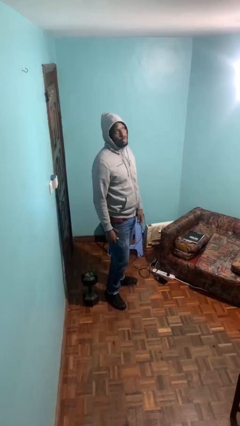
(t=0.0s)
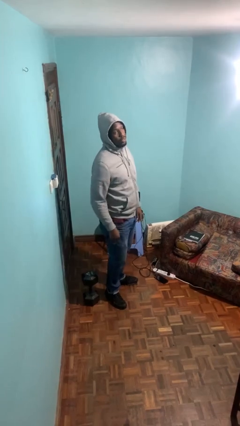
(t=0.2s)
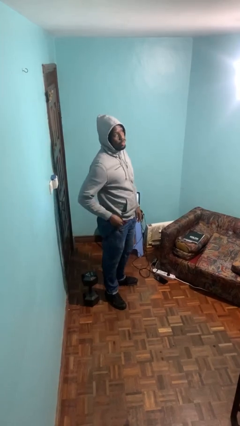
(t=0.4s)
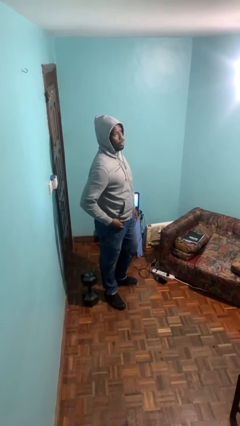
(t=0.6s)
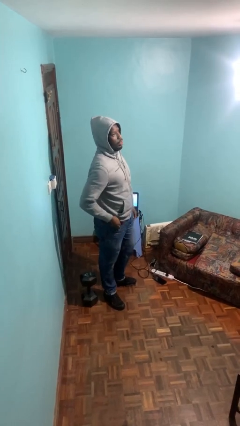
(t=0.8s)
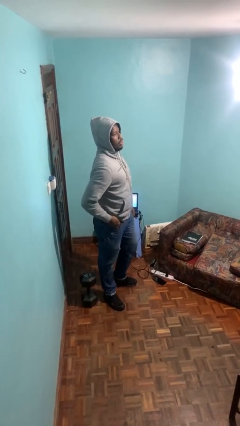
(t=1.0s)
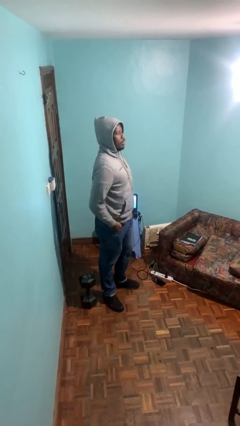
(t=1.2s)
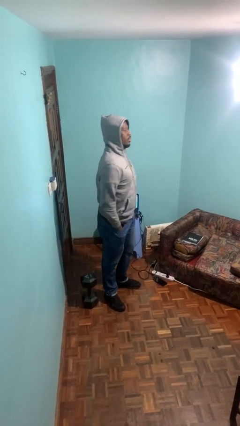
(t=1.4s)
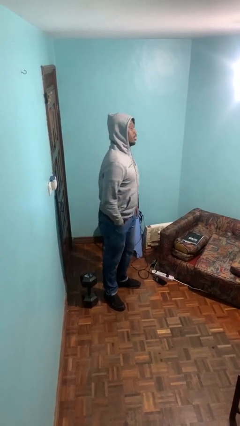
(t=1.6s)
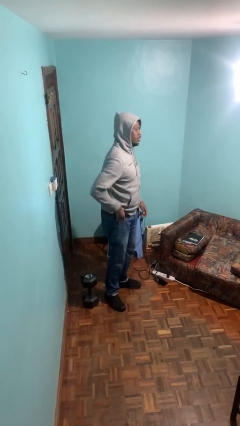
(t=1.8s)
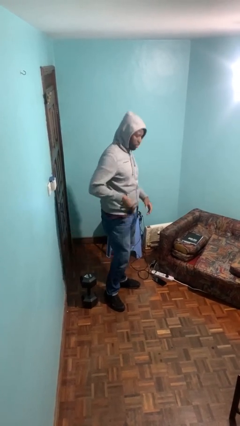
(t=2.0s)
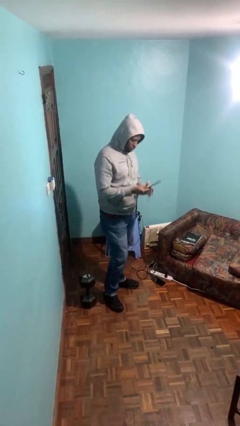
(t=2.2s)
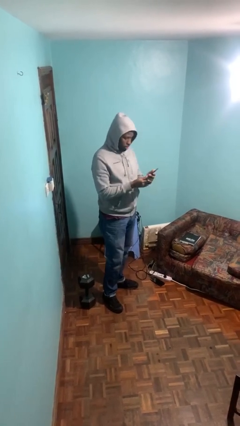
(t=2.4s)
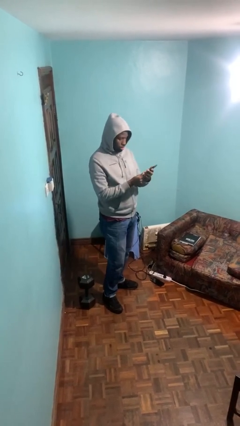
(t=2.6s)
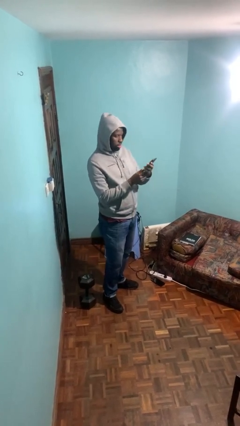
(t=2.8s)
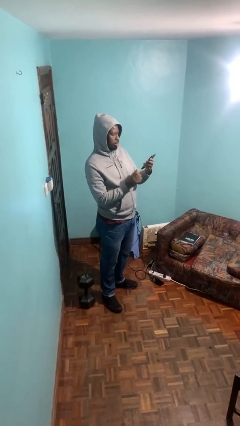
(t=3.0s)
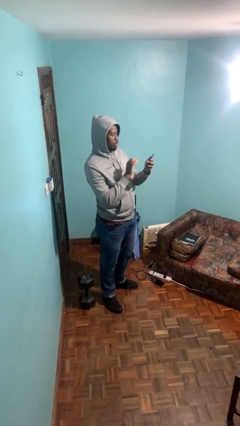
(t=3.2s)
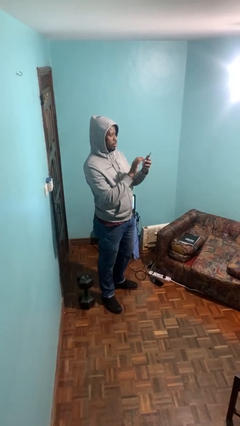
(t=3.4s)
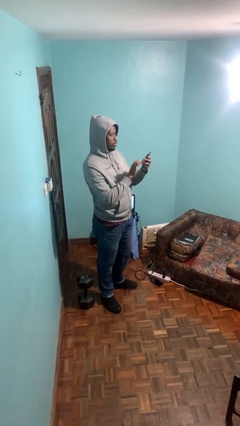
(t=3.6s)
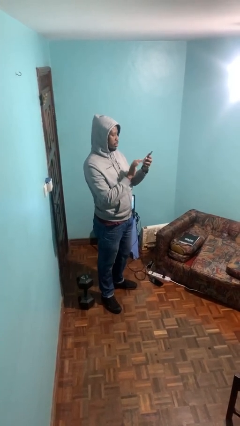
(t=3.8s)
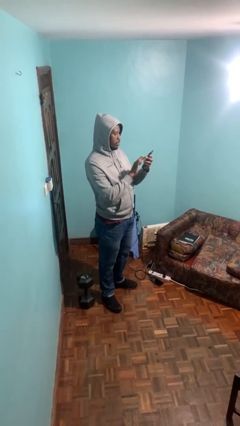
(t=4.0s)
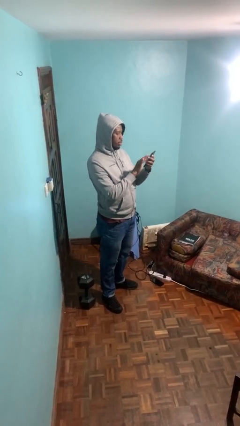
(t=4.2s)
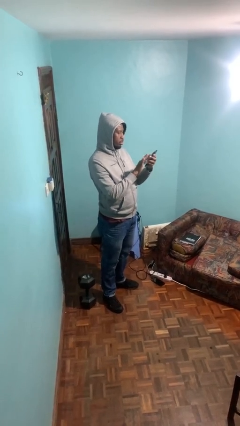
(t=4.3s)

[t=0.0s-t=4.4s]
person takes phone from pocket

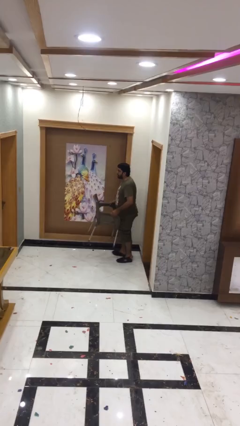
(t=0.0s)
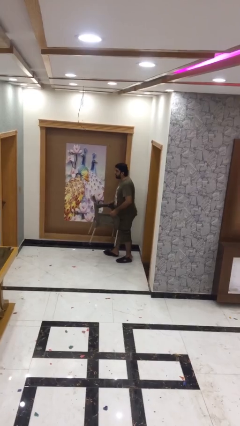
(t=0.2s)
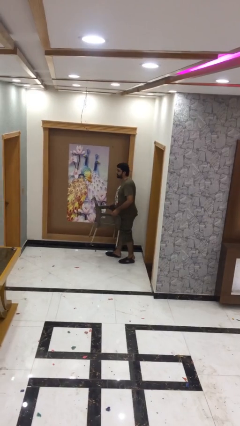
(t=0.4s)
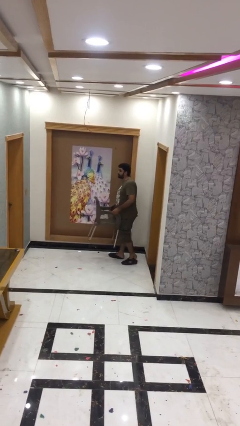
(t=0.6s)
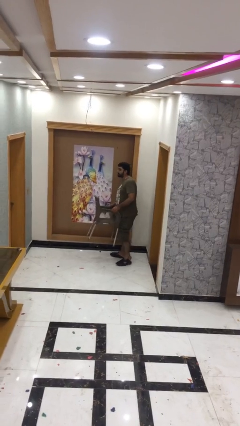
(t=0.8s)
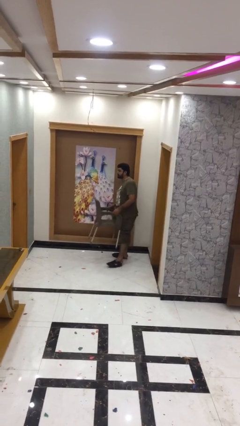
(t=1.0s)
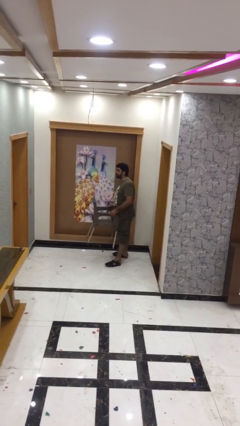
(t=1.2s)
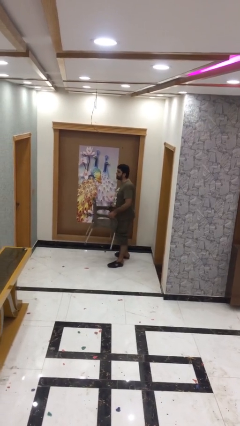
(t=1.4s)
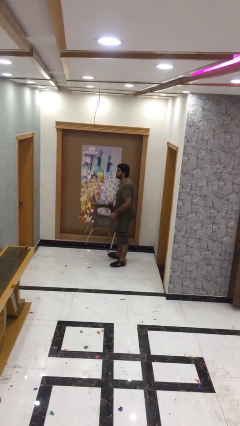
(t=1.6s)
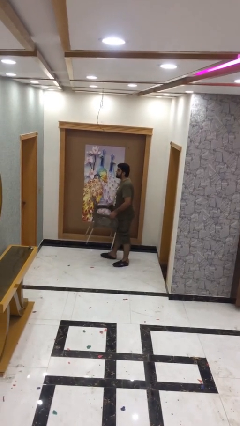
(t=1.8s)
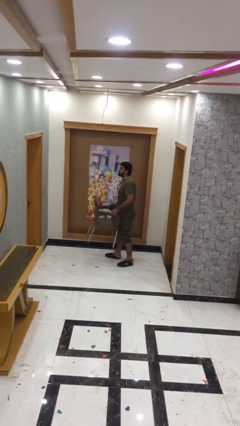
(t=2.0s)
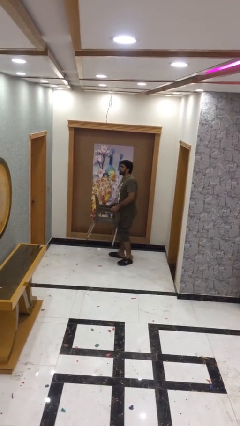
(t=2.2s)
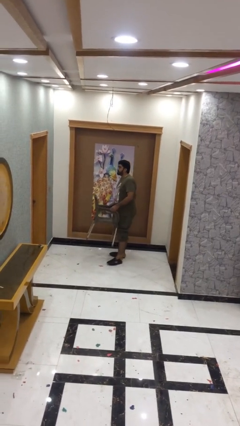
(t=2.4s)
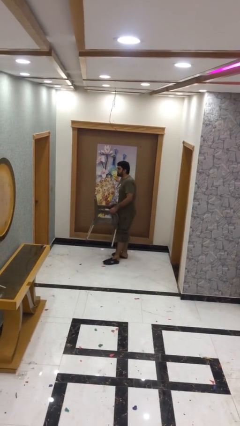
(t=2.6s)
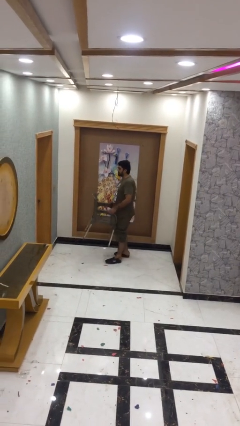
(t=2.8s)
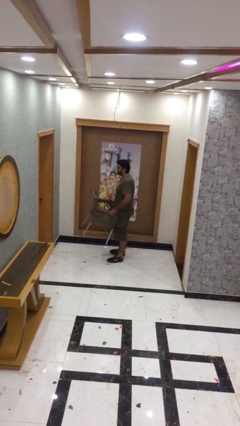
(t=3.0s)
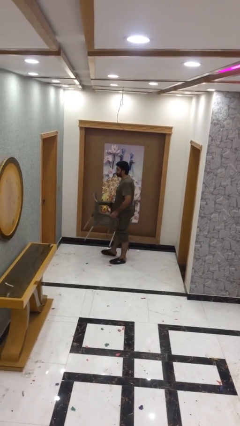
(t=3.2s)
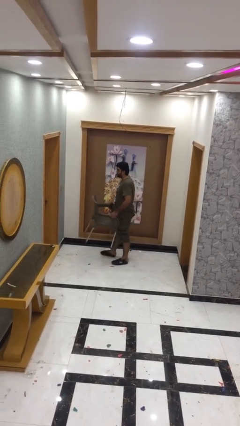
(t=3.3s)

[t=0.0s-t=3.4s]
person carries heavy object

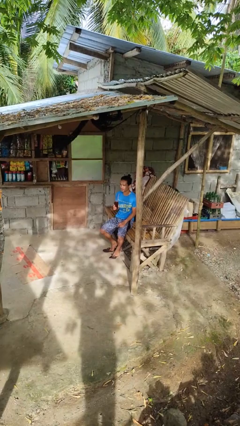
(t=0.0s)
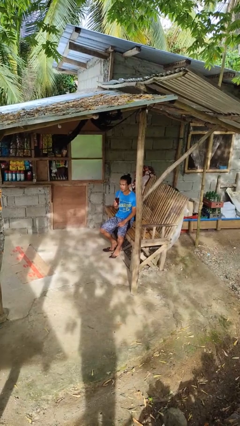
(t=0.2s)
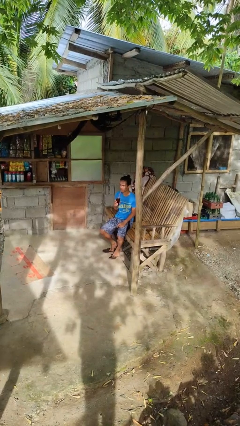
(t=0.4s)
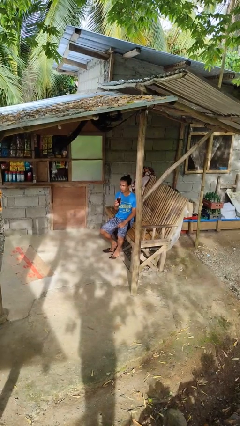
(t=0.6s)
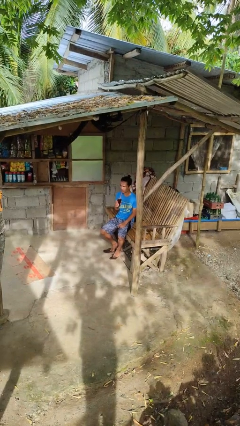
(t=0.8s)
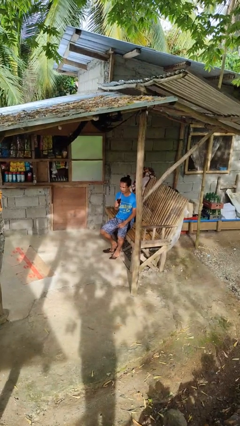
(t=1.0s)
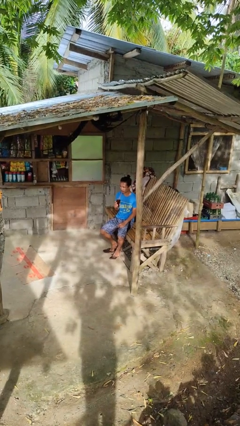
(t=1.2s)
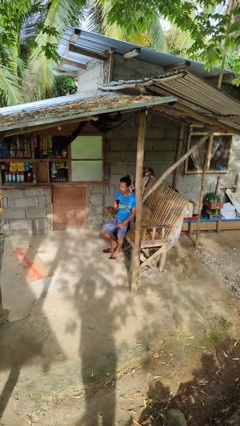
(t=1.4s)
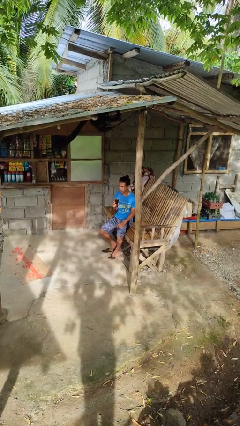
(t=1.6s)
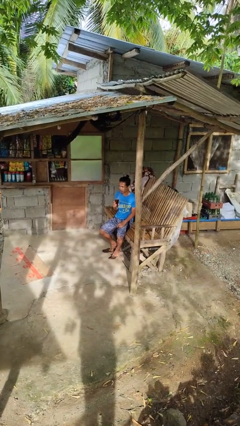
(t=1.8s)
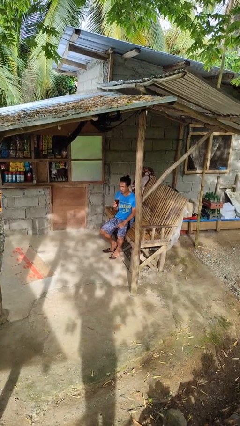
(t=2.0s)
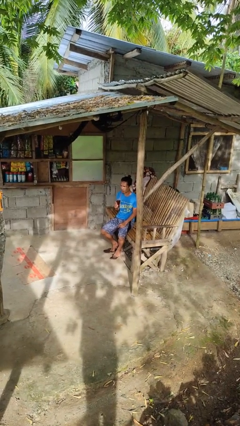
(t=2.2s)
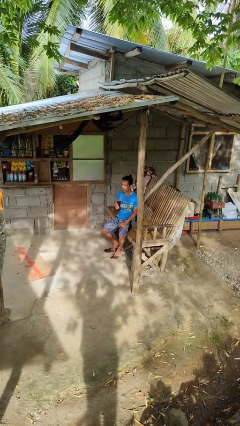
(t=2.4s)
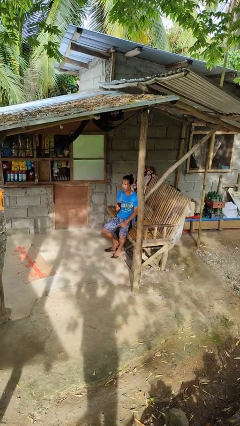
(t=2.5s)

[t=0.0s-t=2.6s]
person drinks from straw

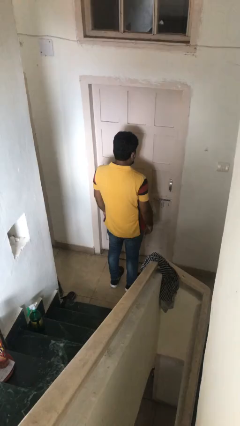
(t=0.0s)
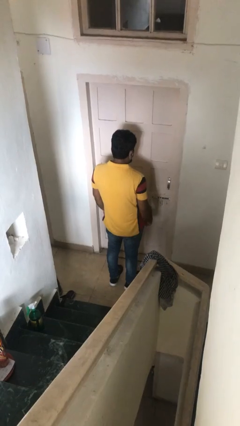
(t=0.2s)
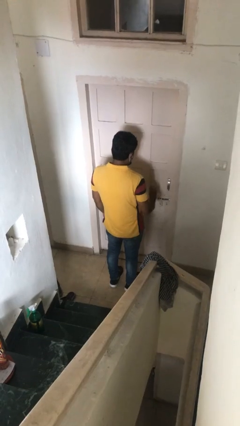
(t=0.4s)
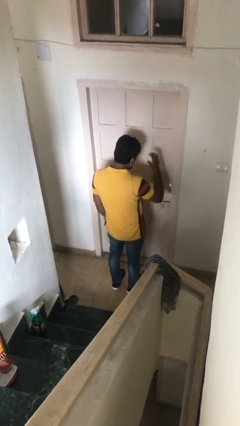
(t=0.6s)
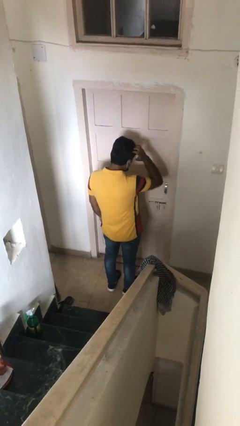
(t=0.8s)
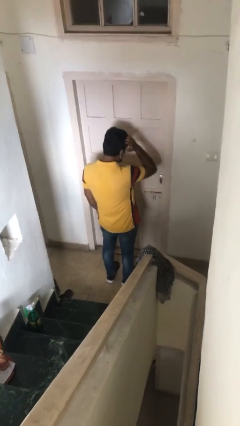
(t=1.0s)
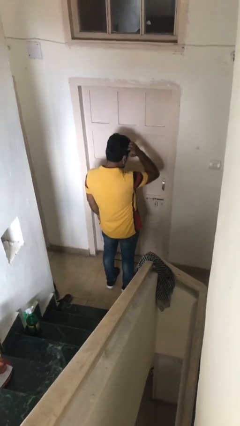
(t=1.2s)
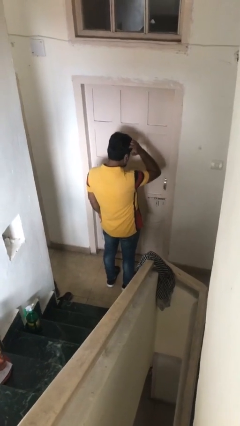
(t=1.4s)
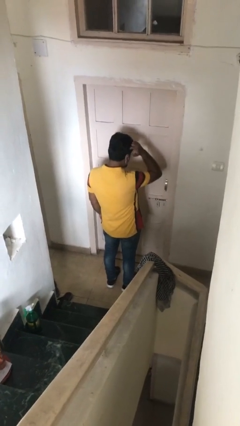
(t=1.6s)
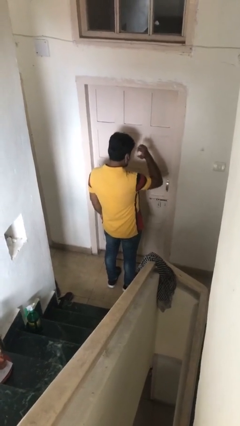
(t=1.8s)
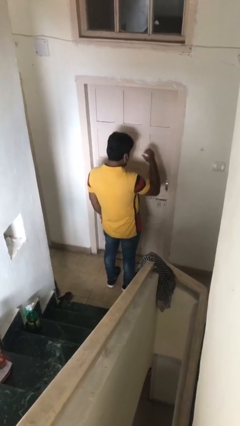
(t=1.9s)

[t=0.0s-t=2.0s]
person scratches face

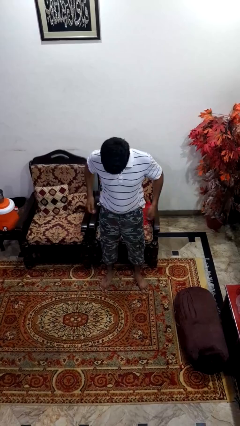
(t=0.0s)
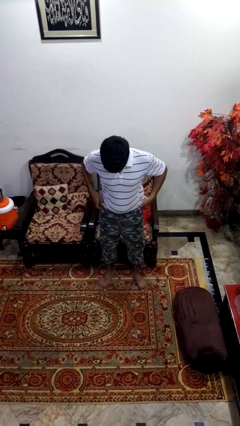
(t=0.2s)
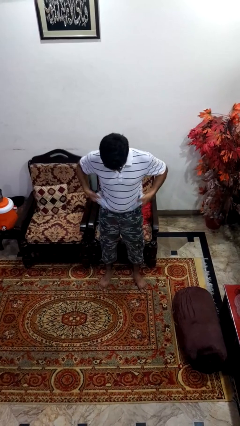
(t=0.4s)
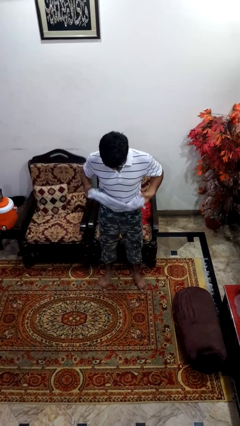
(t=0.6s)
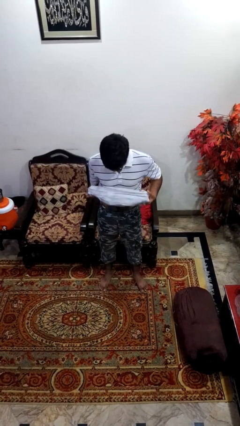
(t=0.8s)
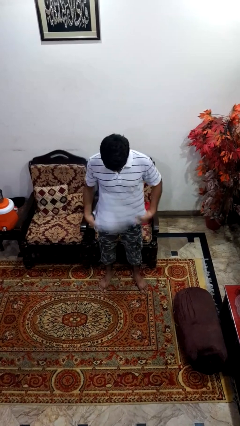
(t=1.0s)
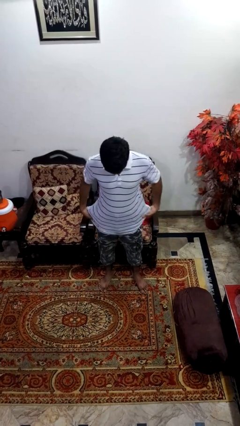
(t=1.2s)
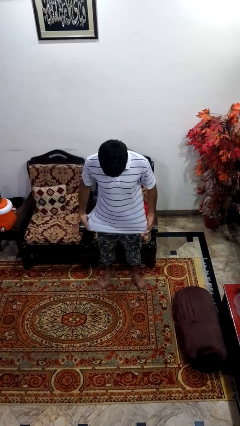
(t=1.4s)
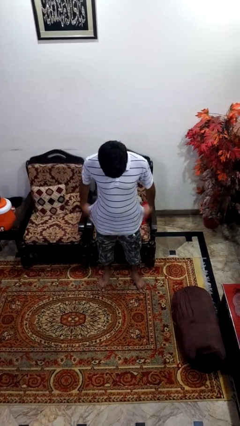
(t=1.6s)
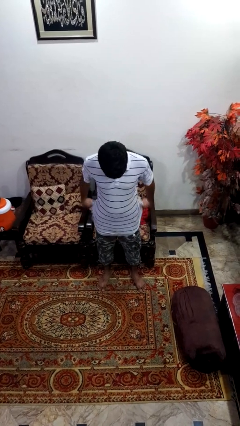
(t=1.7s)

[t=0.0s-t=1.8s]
person untucks shirt

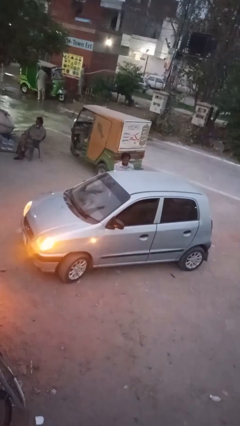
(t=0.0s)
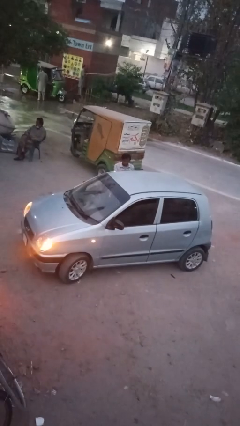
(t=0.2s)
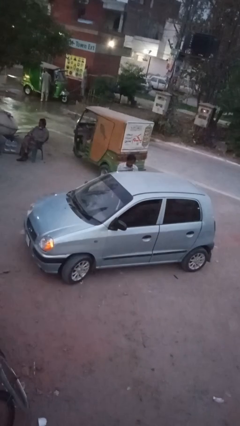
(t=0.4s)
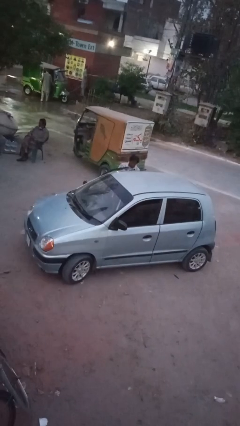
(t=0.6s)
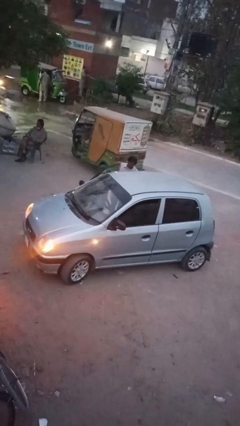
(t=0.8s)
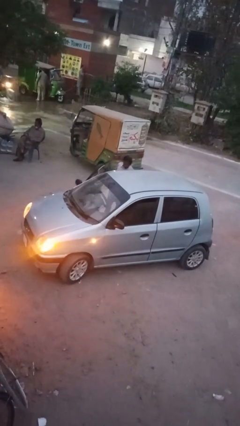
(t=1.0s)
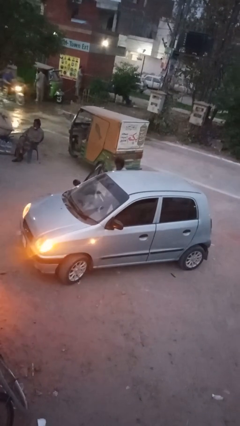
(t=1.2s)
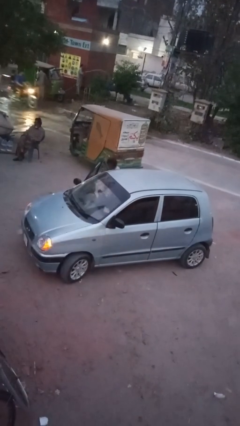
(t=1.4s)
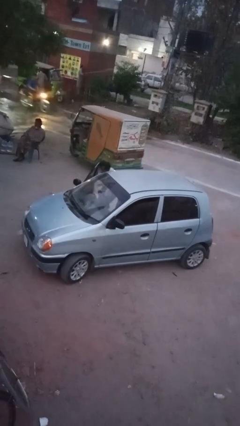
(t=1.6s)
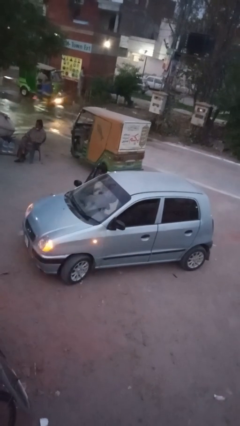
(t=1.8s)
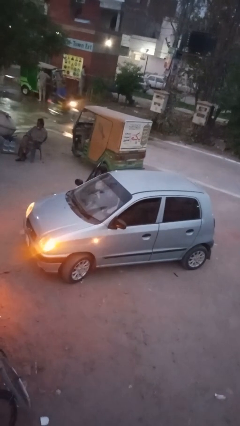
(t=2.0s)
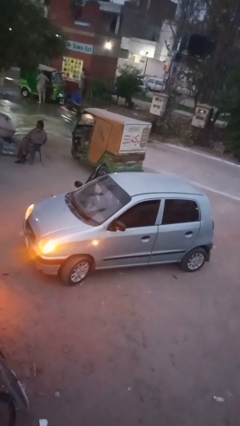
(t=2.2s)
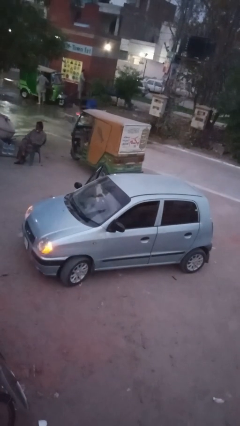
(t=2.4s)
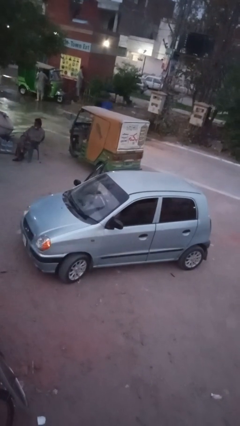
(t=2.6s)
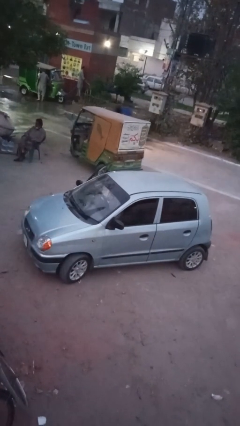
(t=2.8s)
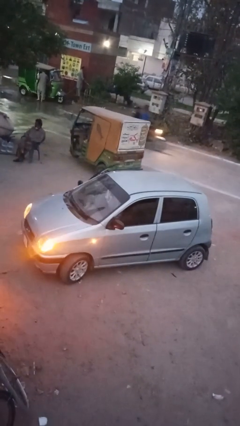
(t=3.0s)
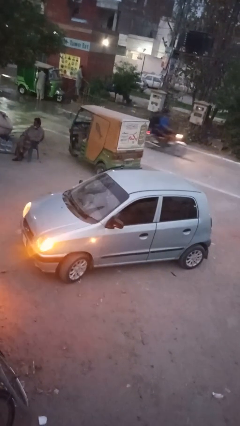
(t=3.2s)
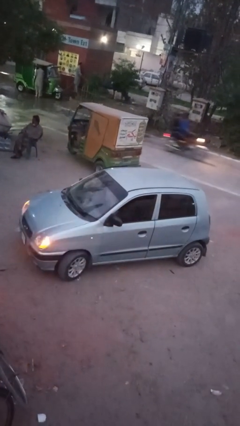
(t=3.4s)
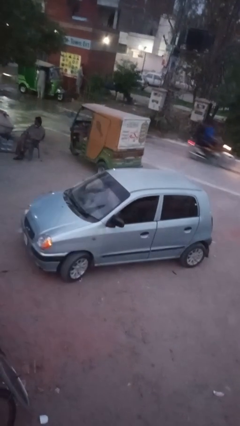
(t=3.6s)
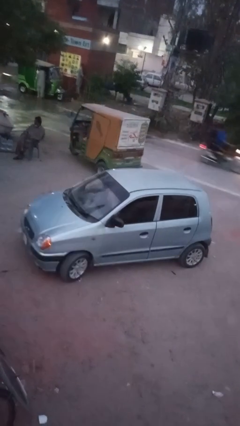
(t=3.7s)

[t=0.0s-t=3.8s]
car picks up person
